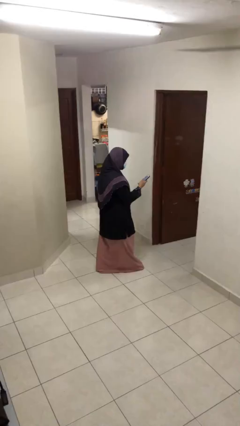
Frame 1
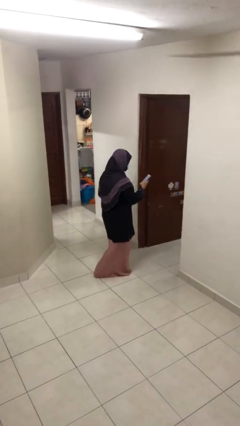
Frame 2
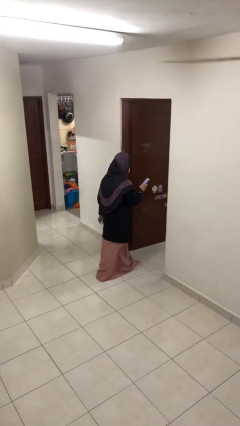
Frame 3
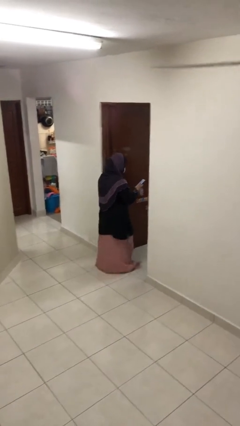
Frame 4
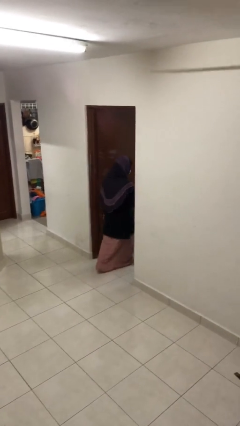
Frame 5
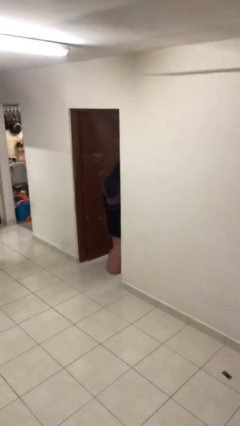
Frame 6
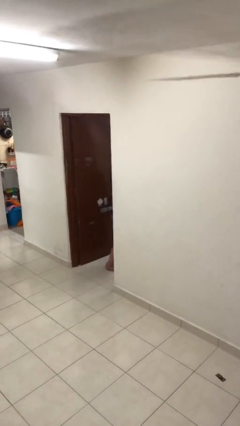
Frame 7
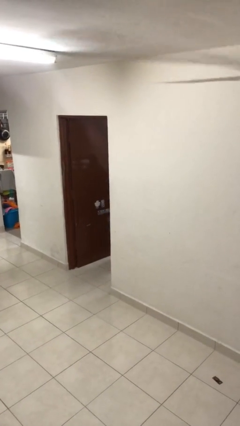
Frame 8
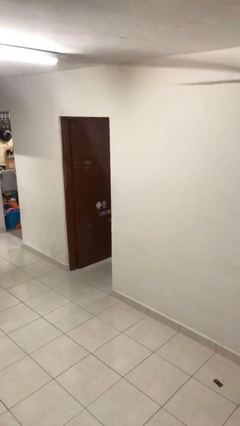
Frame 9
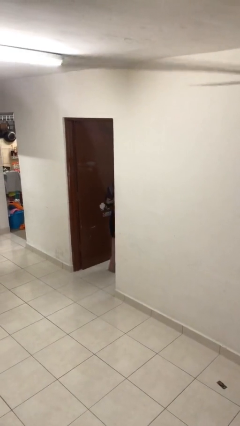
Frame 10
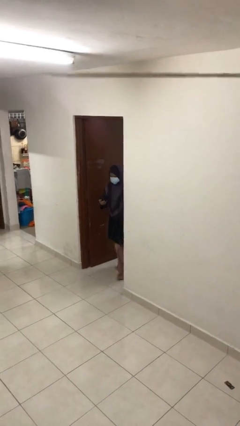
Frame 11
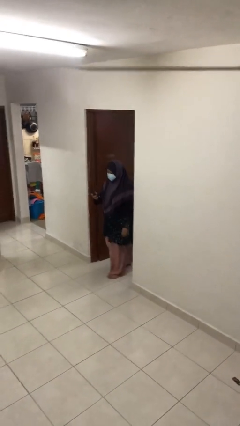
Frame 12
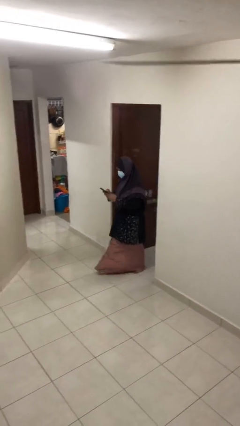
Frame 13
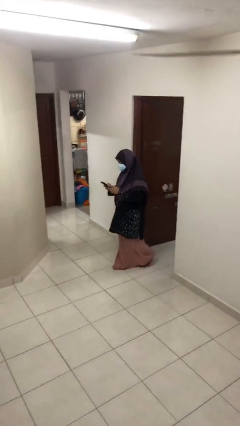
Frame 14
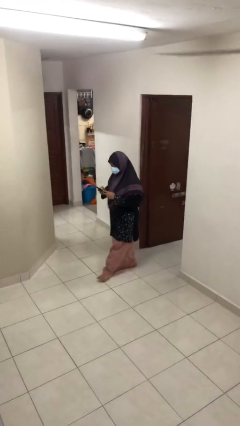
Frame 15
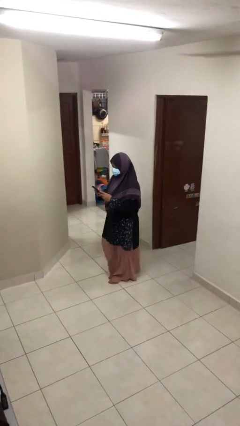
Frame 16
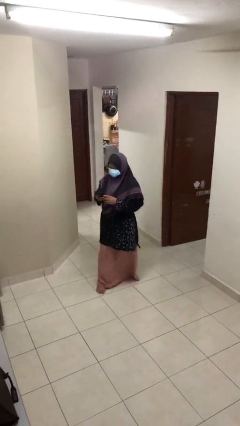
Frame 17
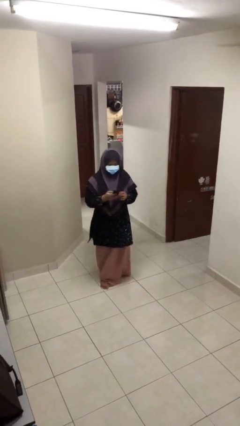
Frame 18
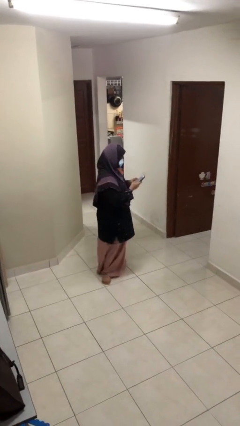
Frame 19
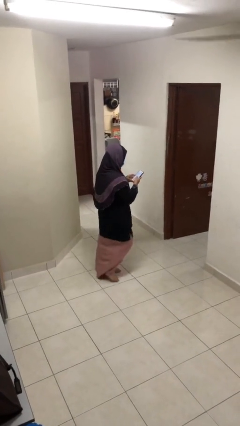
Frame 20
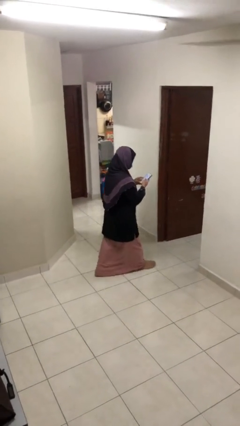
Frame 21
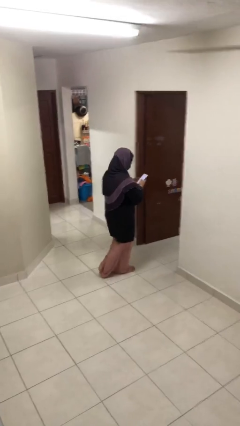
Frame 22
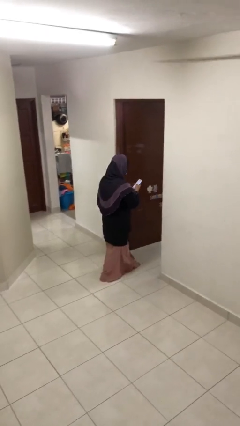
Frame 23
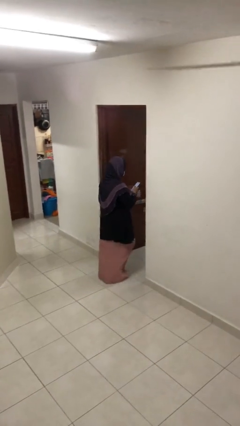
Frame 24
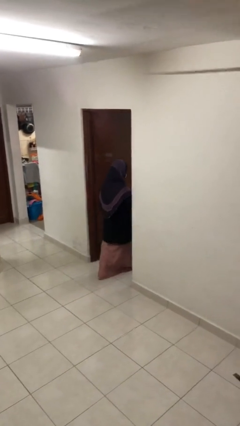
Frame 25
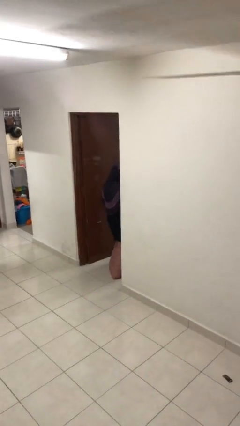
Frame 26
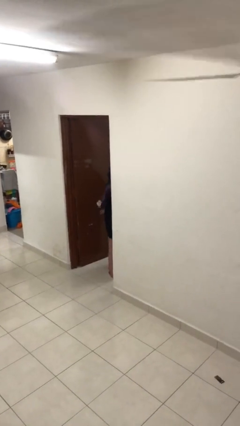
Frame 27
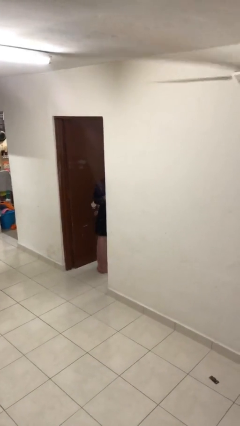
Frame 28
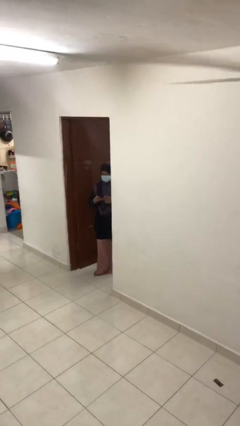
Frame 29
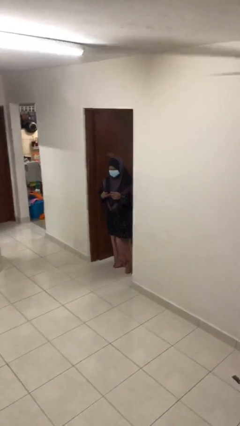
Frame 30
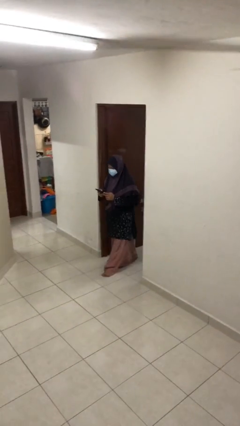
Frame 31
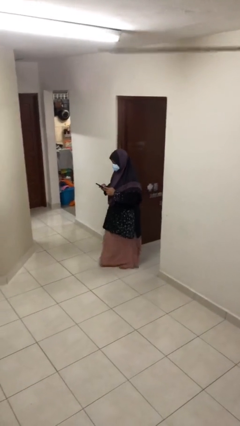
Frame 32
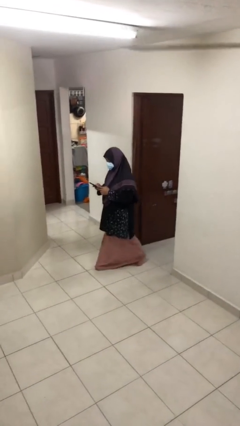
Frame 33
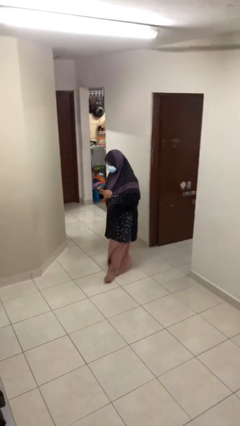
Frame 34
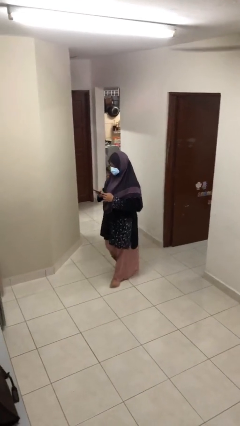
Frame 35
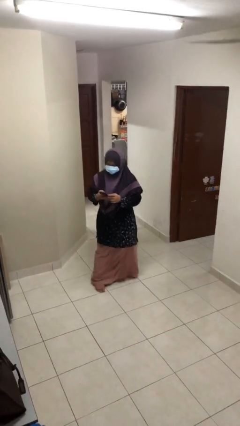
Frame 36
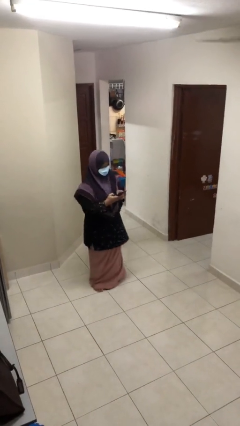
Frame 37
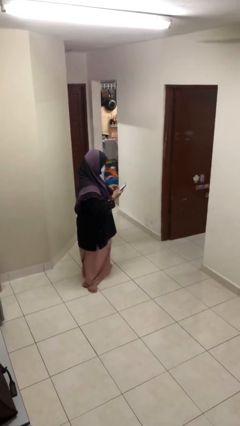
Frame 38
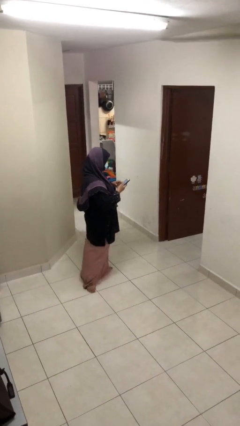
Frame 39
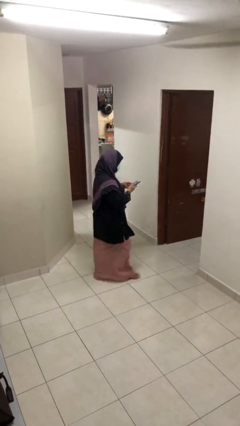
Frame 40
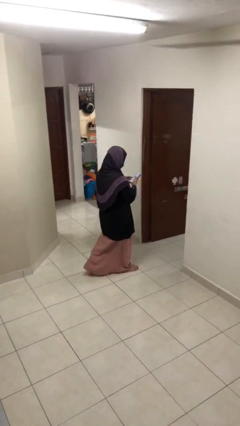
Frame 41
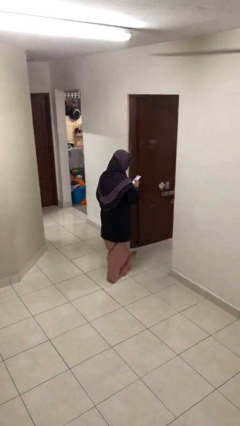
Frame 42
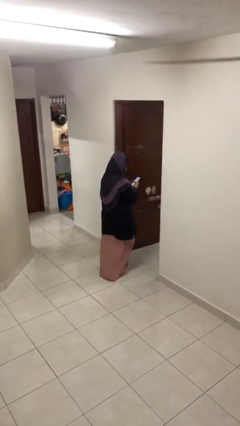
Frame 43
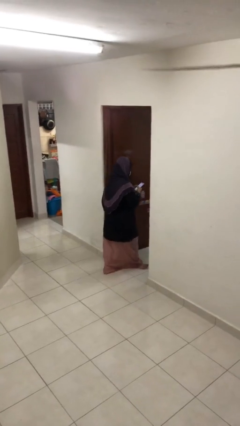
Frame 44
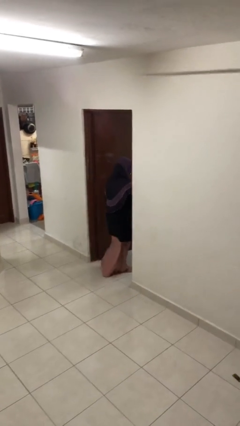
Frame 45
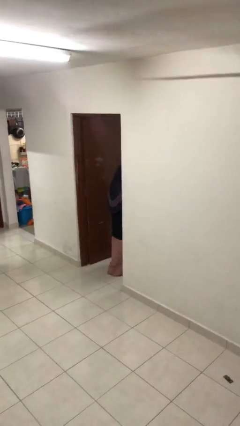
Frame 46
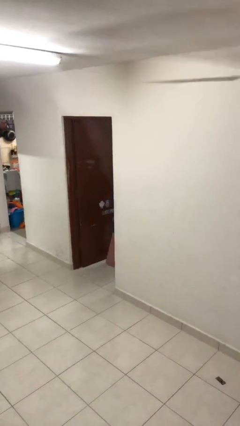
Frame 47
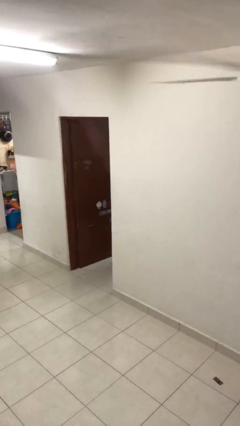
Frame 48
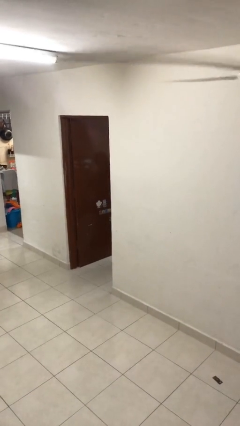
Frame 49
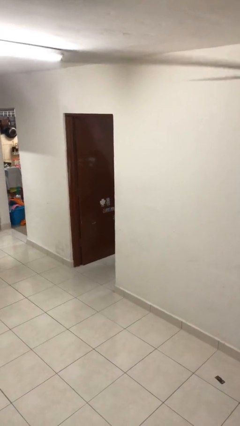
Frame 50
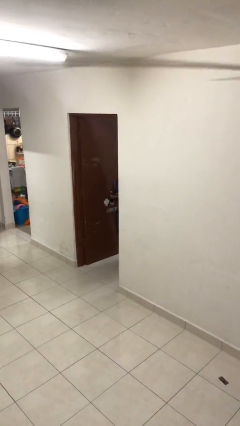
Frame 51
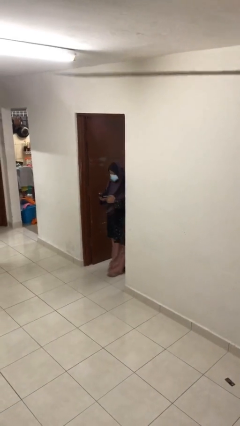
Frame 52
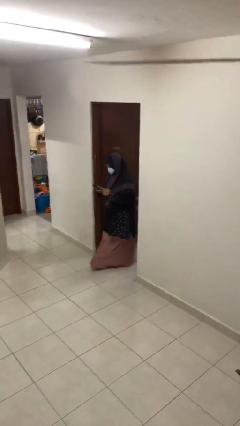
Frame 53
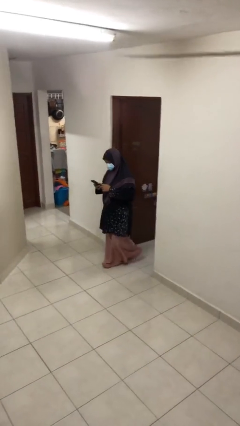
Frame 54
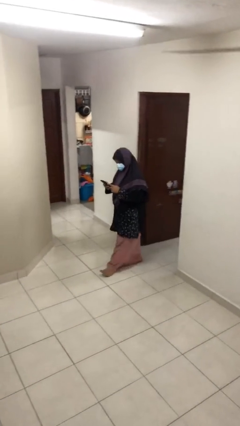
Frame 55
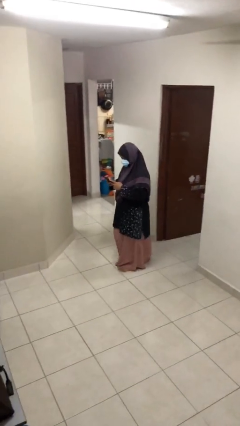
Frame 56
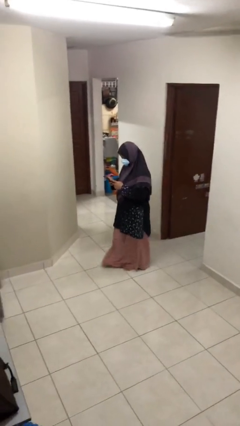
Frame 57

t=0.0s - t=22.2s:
person texts on phone

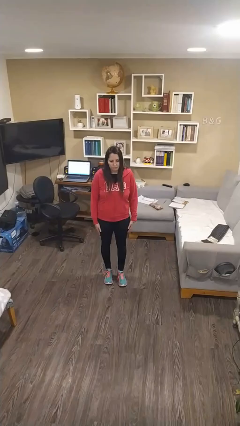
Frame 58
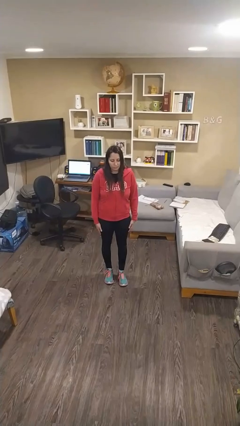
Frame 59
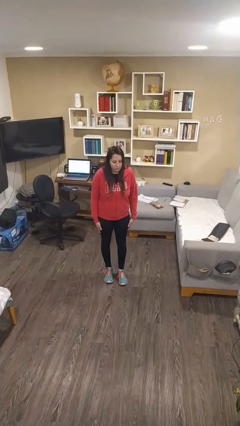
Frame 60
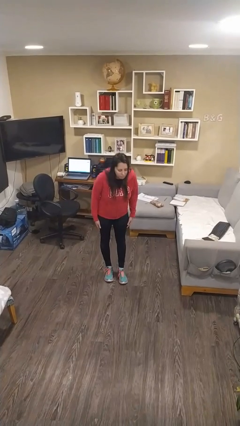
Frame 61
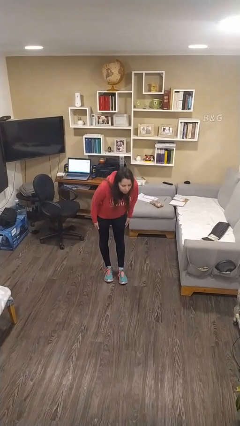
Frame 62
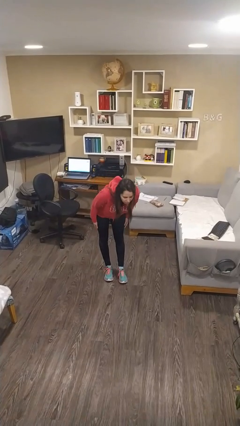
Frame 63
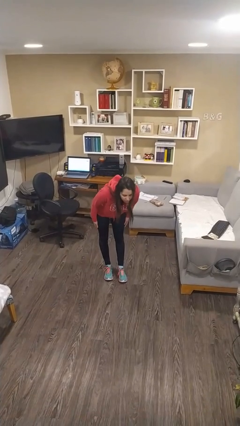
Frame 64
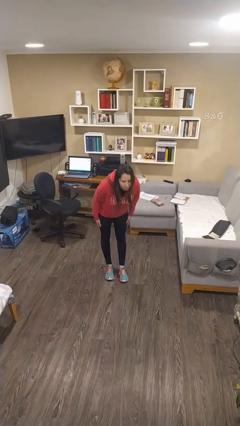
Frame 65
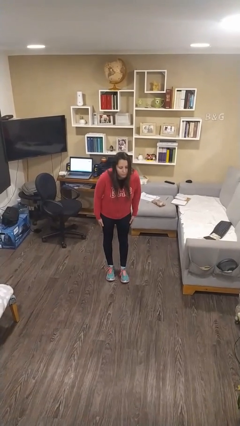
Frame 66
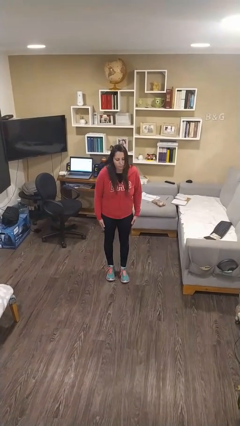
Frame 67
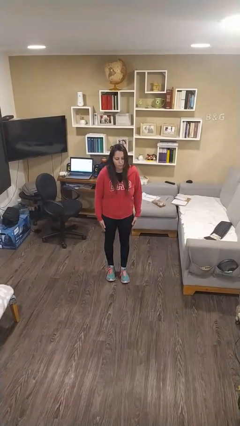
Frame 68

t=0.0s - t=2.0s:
person bows

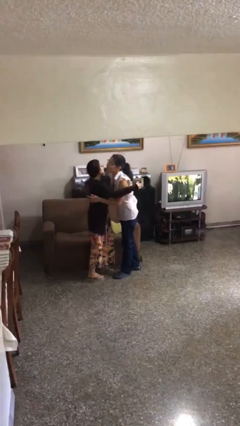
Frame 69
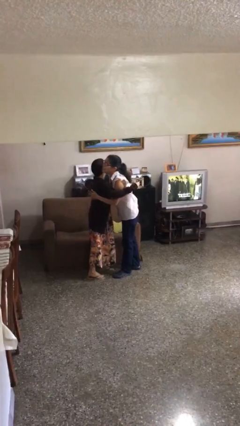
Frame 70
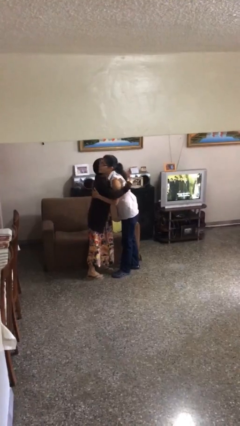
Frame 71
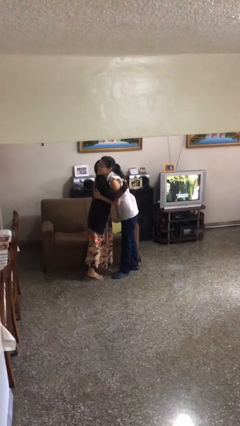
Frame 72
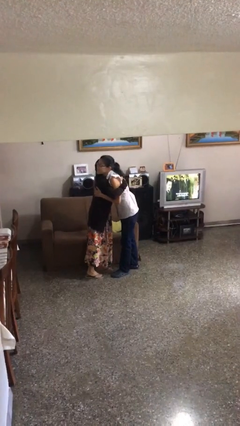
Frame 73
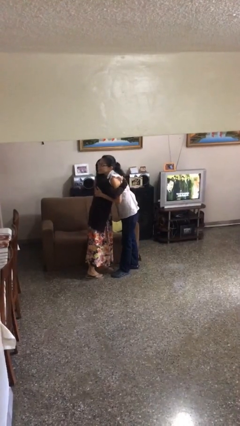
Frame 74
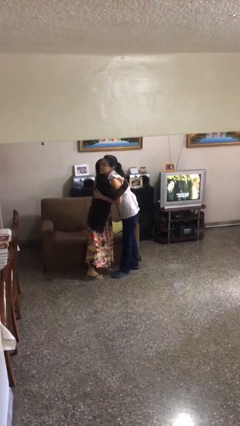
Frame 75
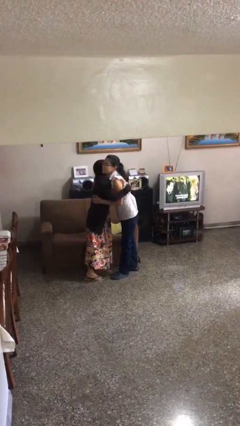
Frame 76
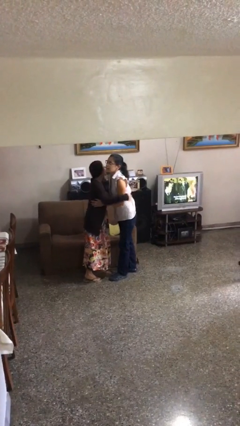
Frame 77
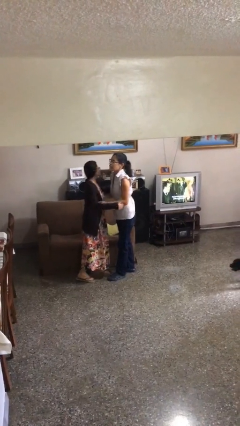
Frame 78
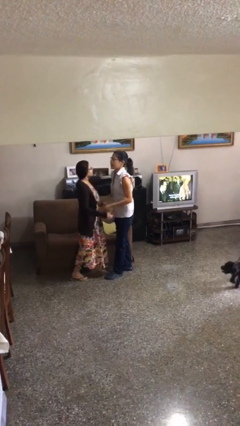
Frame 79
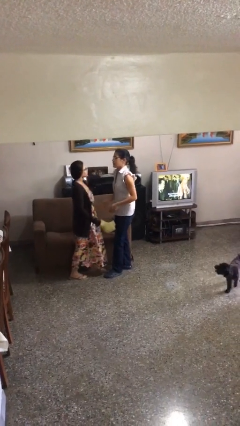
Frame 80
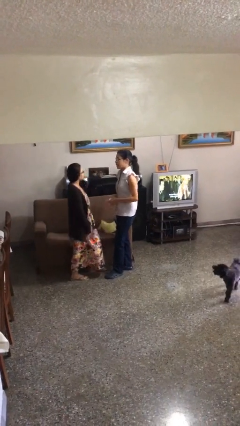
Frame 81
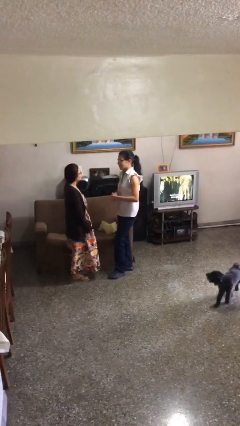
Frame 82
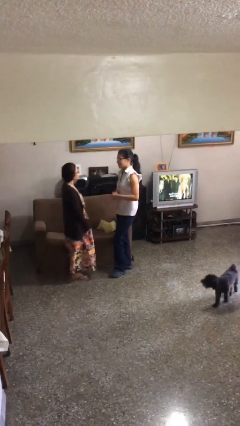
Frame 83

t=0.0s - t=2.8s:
person embraces person

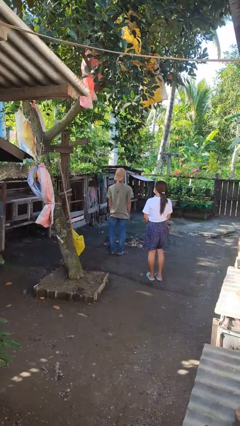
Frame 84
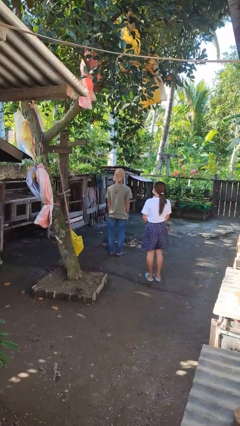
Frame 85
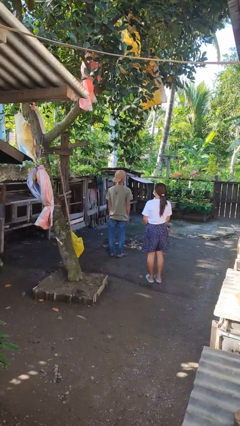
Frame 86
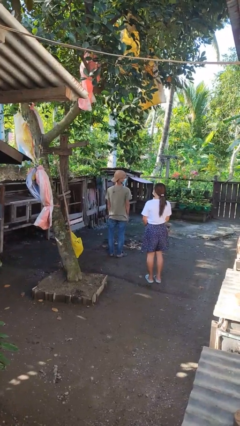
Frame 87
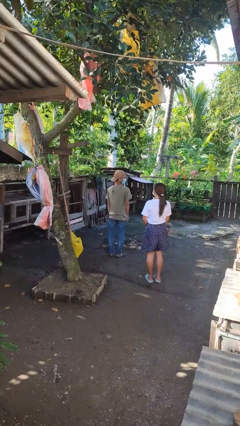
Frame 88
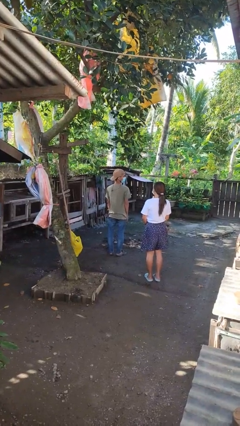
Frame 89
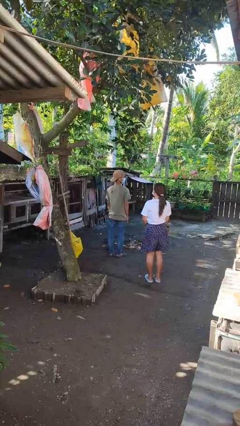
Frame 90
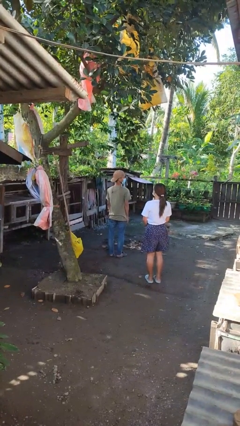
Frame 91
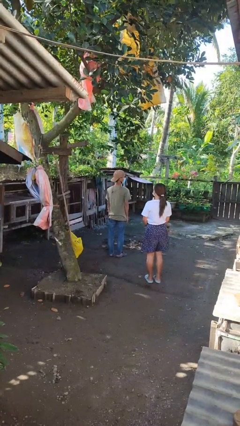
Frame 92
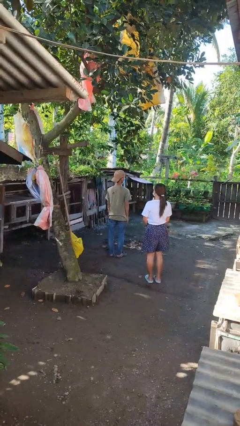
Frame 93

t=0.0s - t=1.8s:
person looks over shoulder
